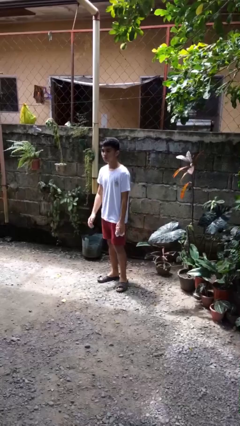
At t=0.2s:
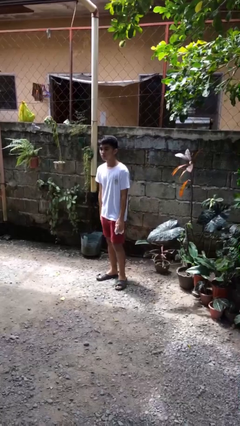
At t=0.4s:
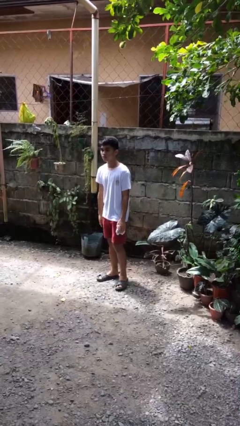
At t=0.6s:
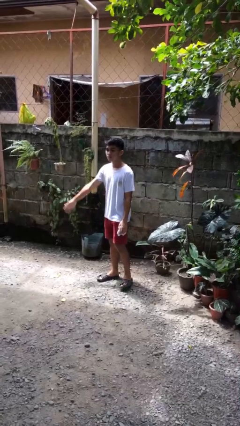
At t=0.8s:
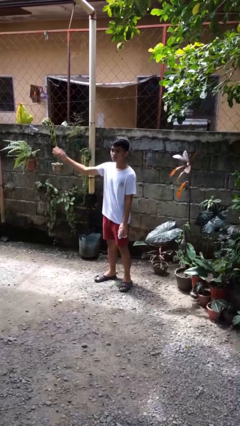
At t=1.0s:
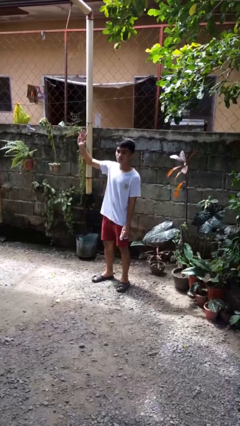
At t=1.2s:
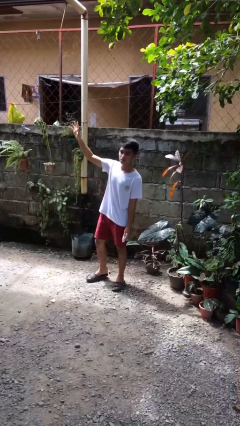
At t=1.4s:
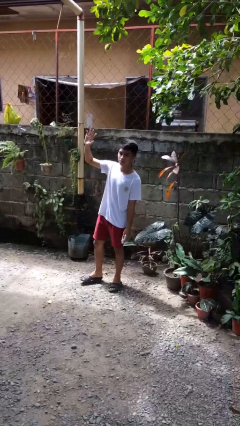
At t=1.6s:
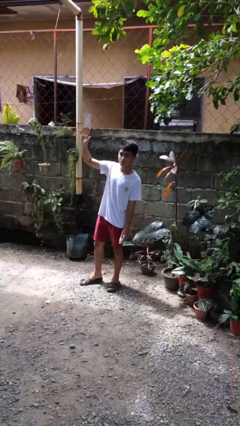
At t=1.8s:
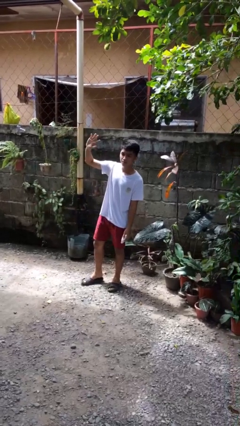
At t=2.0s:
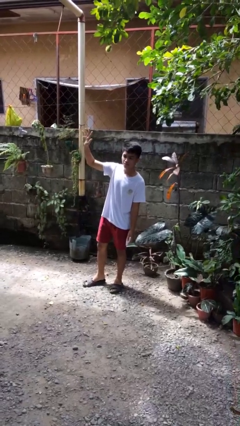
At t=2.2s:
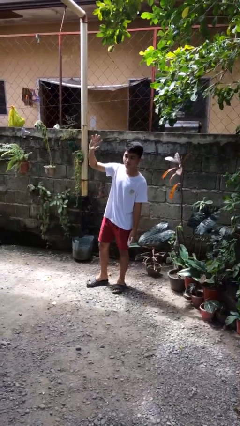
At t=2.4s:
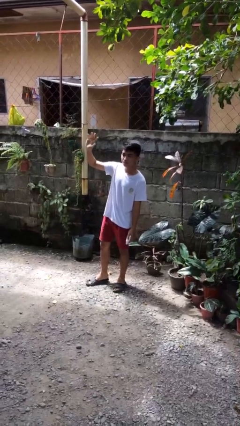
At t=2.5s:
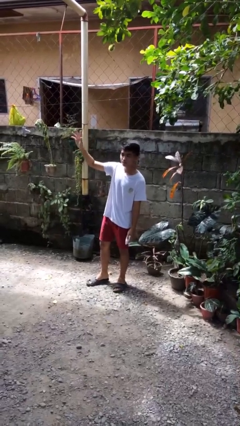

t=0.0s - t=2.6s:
person waves at person

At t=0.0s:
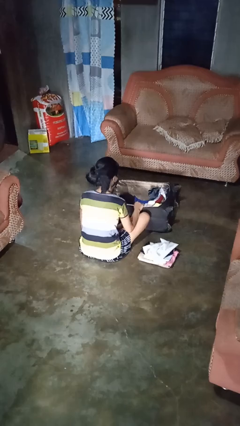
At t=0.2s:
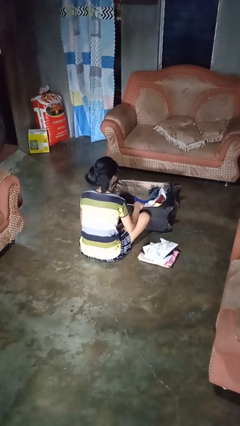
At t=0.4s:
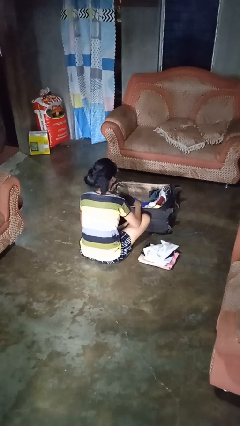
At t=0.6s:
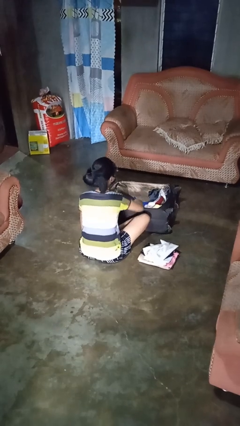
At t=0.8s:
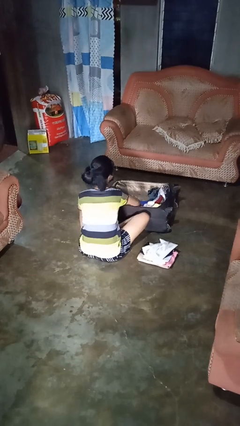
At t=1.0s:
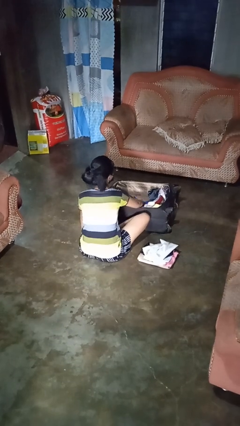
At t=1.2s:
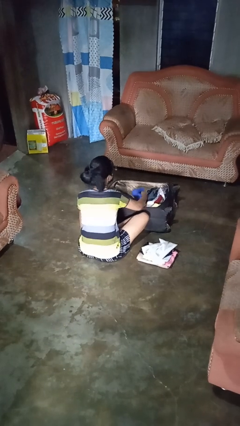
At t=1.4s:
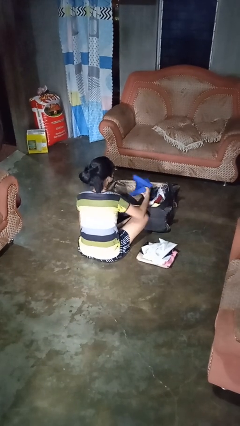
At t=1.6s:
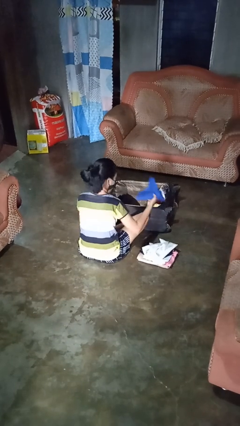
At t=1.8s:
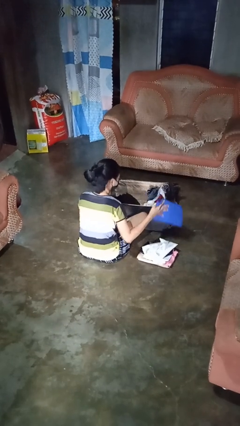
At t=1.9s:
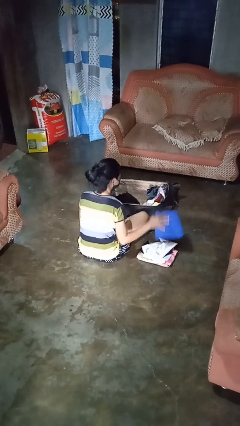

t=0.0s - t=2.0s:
person unloads clothes from suitcase

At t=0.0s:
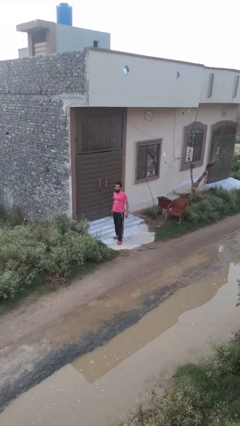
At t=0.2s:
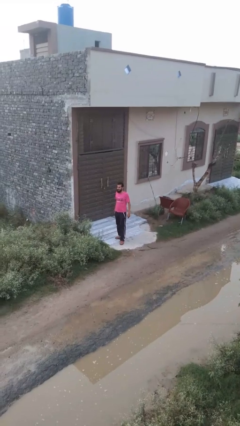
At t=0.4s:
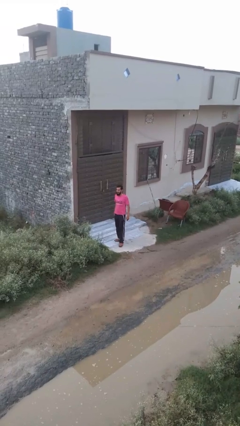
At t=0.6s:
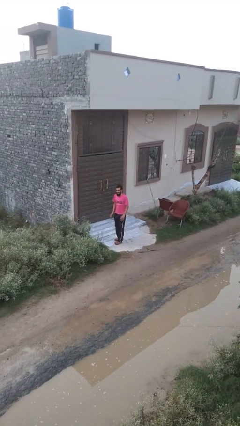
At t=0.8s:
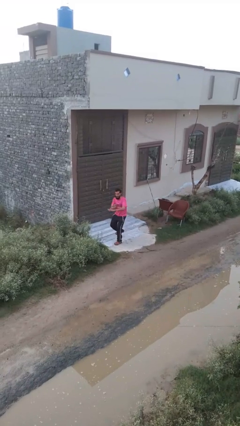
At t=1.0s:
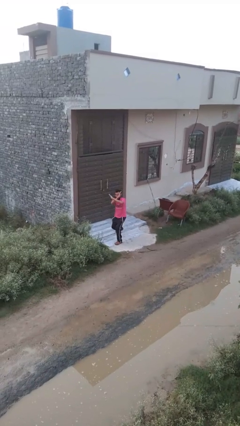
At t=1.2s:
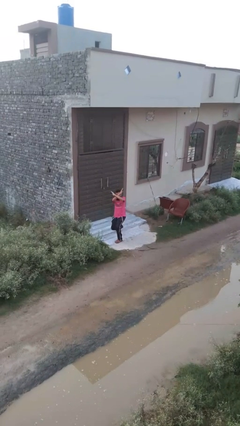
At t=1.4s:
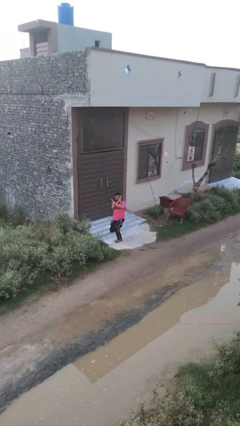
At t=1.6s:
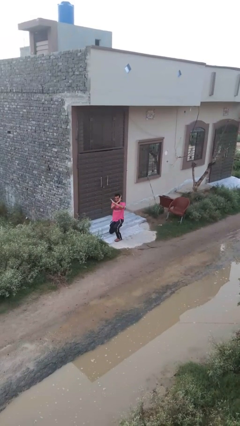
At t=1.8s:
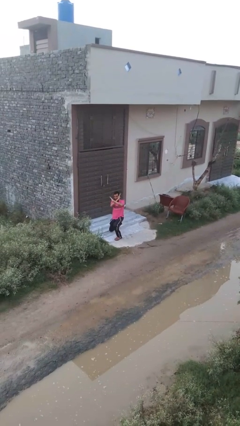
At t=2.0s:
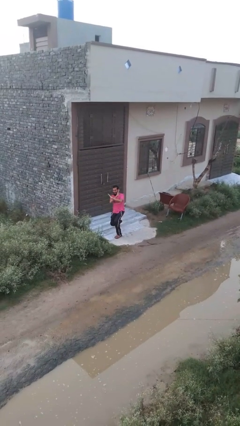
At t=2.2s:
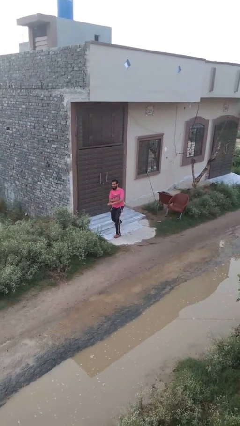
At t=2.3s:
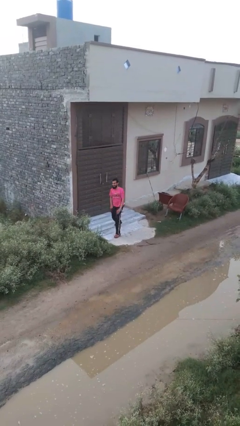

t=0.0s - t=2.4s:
person crosses arms

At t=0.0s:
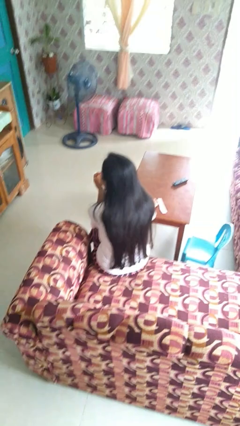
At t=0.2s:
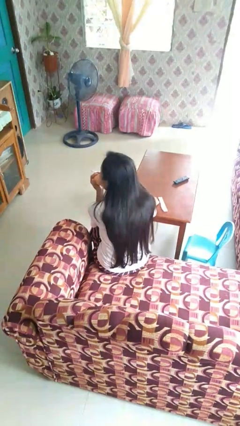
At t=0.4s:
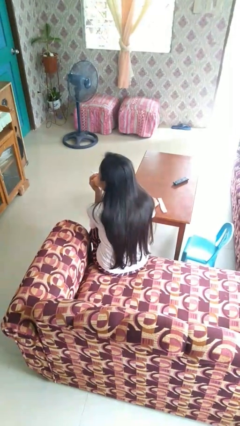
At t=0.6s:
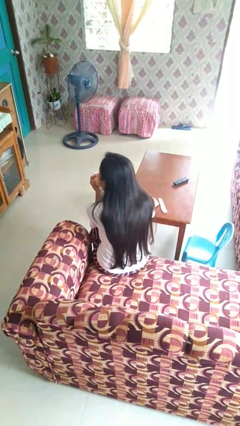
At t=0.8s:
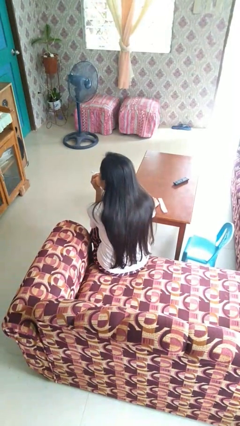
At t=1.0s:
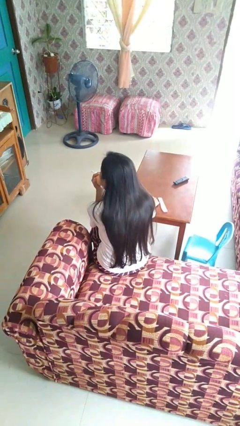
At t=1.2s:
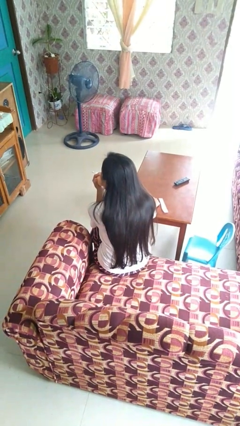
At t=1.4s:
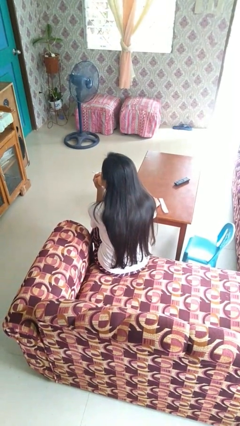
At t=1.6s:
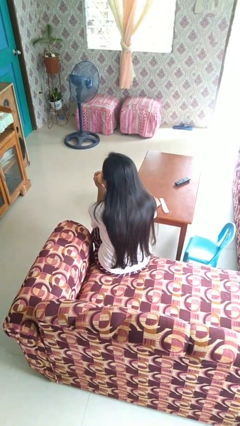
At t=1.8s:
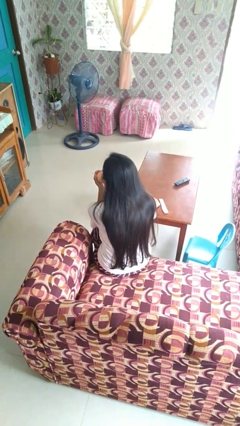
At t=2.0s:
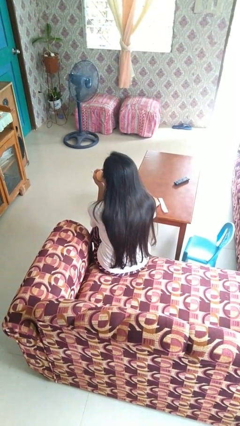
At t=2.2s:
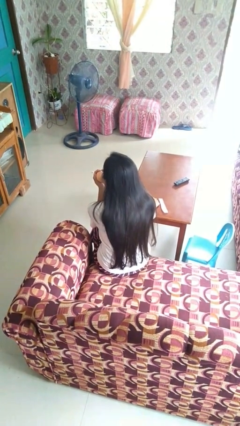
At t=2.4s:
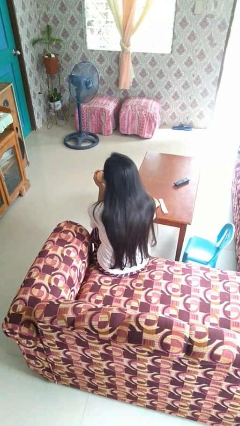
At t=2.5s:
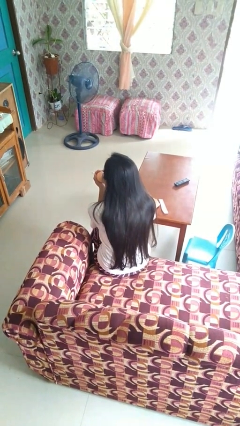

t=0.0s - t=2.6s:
person eats apple

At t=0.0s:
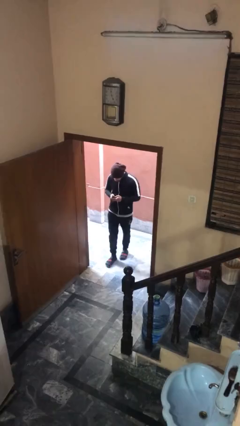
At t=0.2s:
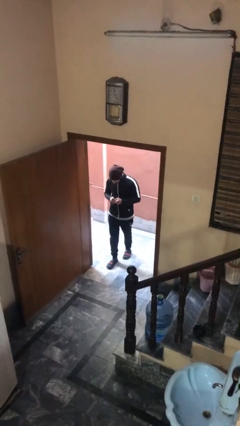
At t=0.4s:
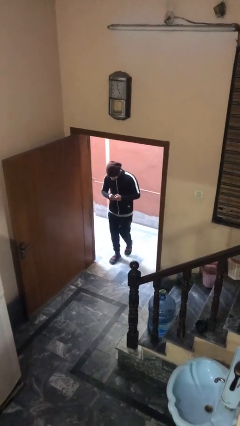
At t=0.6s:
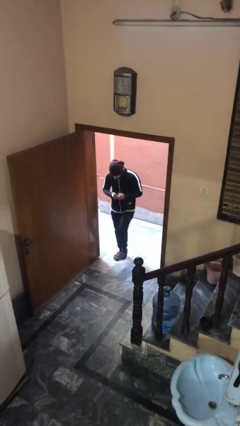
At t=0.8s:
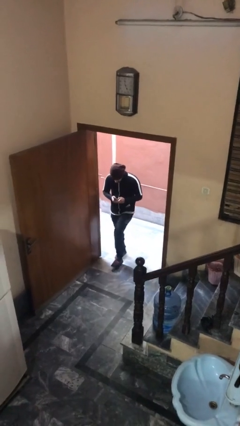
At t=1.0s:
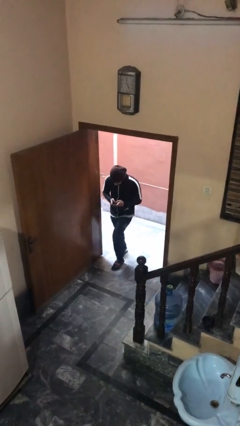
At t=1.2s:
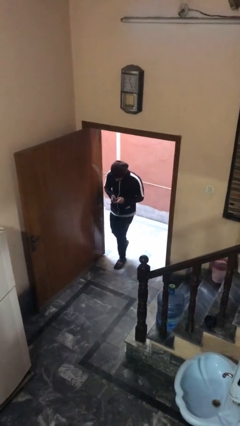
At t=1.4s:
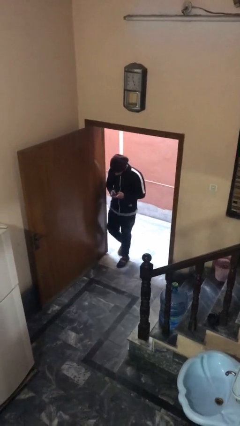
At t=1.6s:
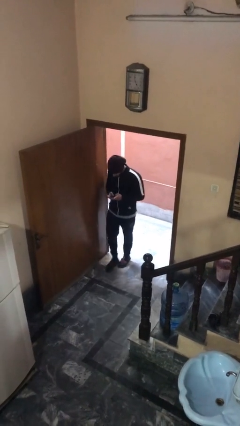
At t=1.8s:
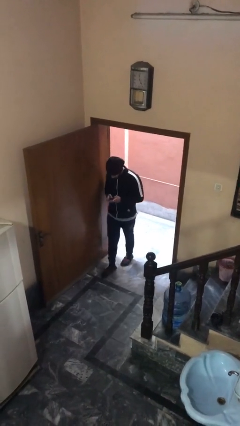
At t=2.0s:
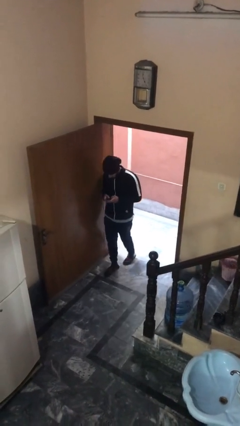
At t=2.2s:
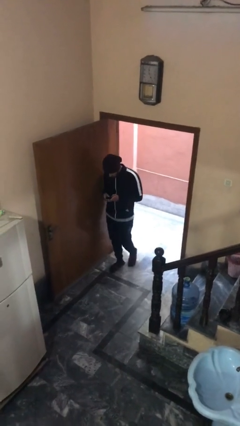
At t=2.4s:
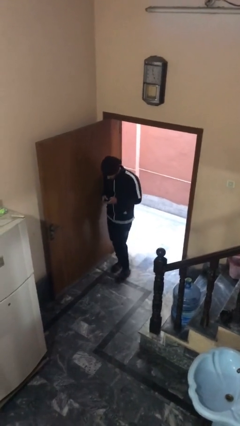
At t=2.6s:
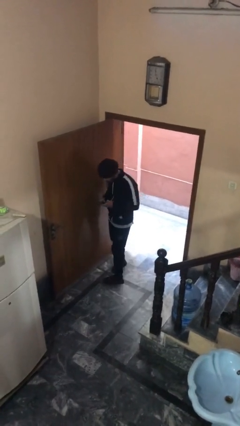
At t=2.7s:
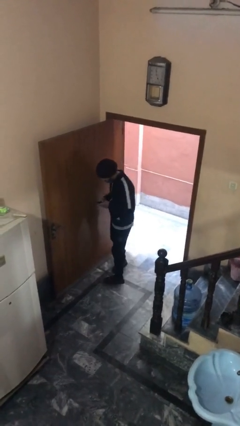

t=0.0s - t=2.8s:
person enters scene through structure

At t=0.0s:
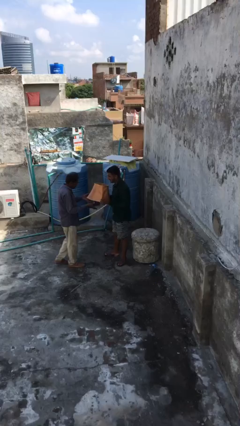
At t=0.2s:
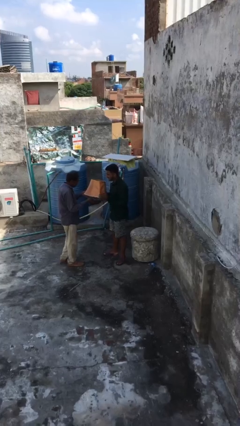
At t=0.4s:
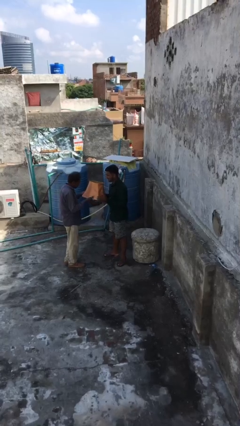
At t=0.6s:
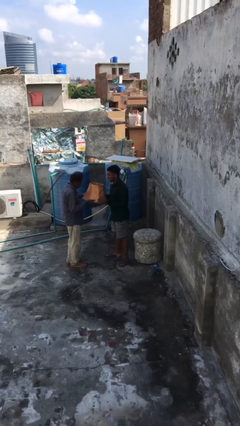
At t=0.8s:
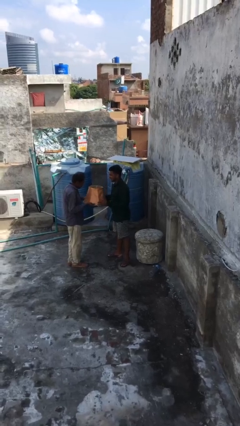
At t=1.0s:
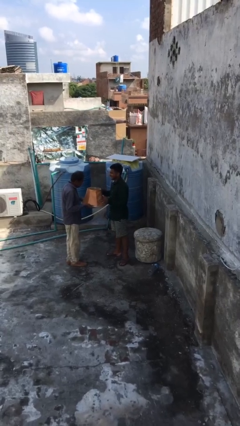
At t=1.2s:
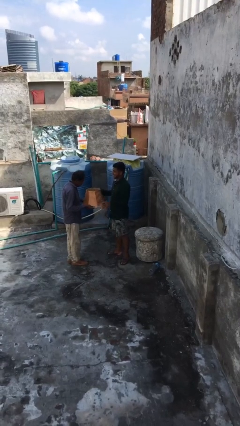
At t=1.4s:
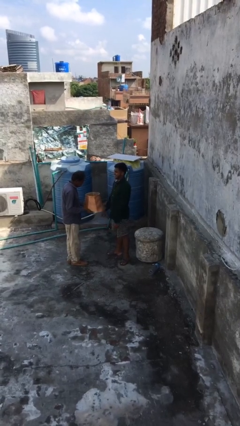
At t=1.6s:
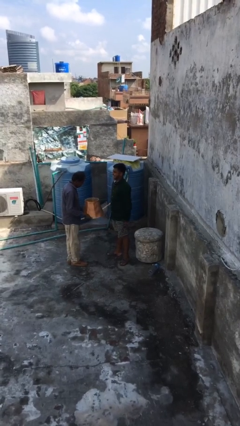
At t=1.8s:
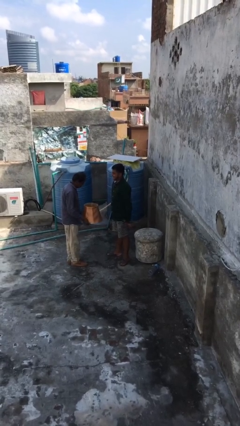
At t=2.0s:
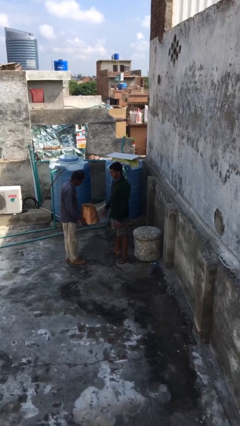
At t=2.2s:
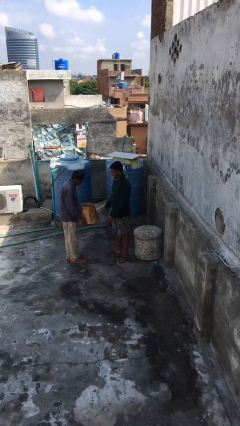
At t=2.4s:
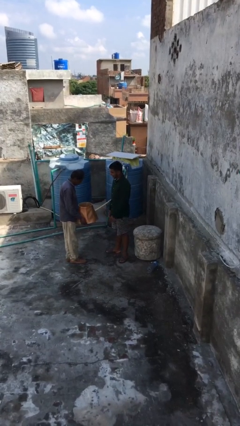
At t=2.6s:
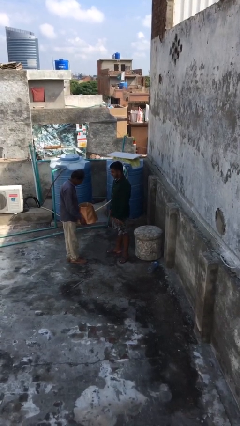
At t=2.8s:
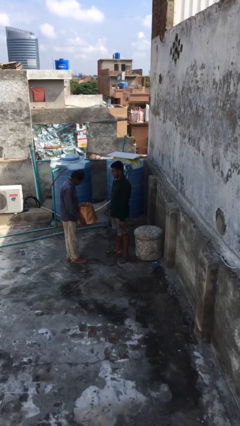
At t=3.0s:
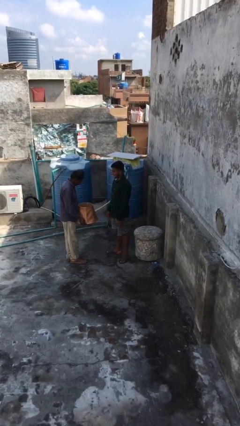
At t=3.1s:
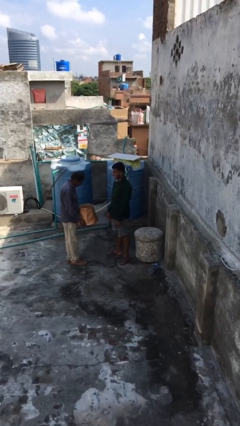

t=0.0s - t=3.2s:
person transfers object to person

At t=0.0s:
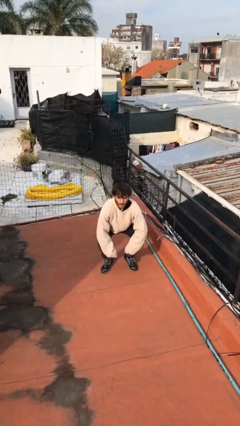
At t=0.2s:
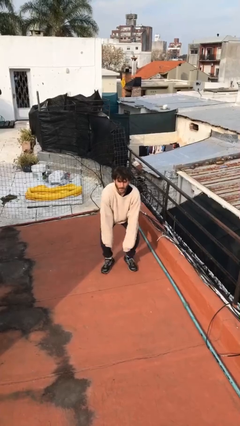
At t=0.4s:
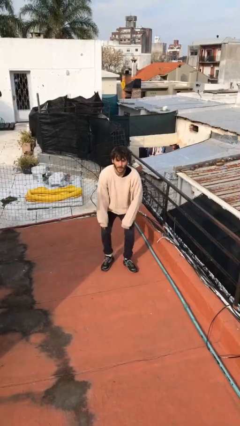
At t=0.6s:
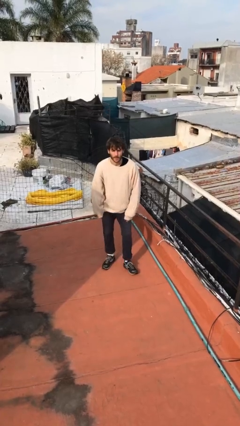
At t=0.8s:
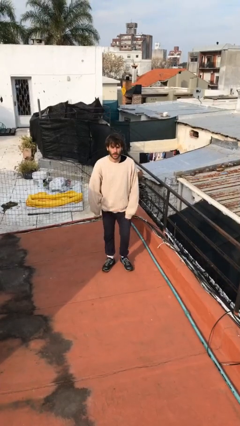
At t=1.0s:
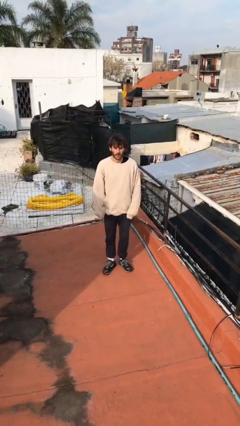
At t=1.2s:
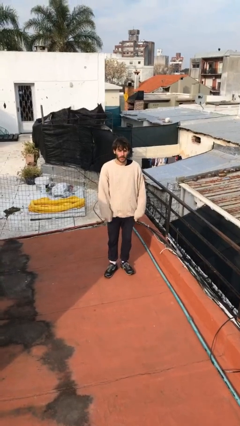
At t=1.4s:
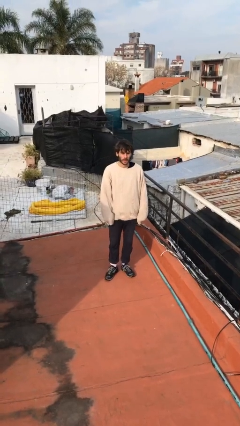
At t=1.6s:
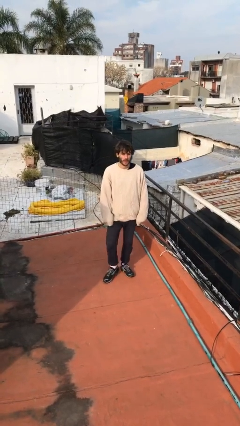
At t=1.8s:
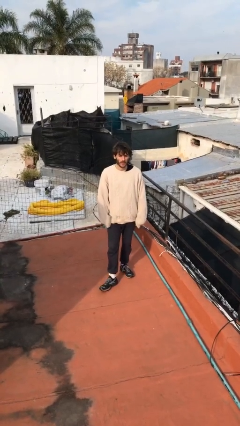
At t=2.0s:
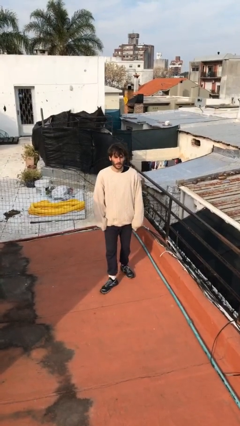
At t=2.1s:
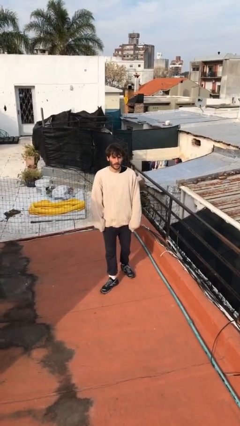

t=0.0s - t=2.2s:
person stands up
